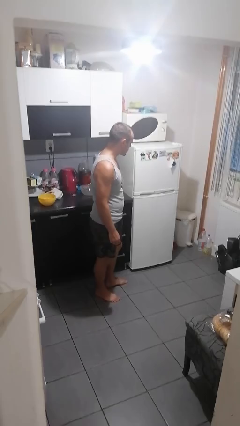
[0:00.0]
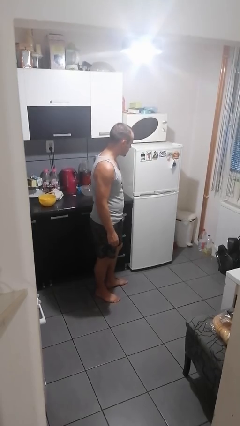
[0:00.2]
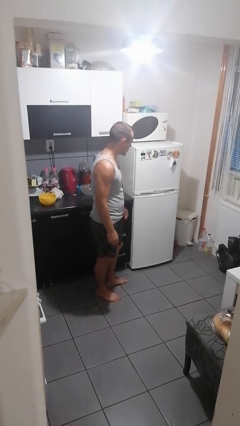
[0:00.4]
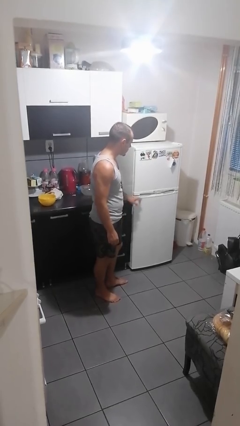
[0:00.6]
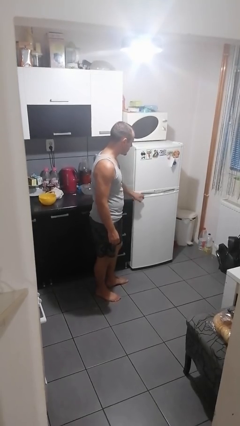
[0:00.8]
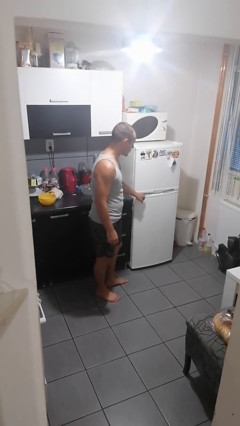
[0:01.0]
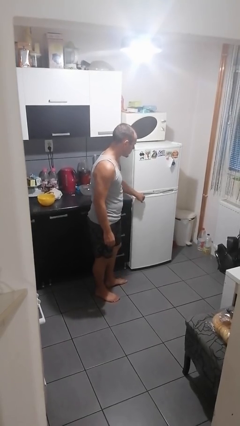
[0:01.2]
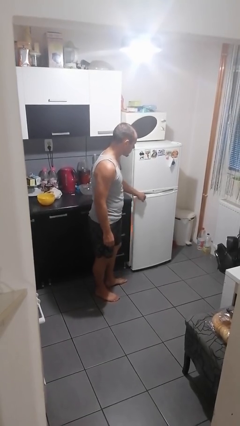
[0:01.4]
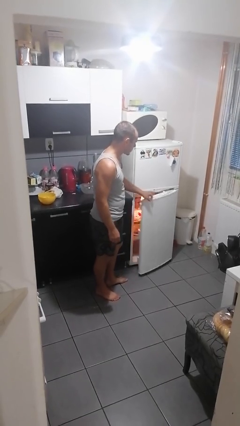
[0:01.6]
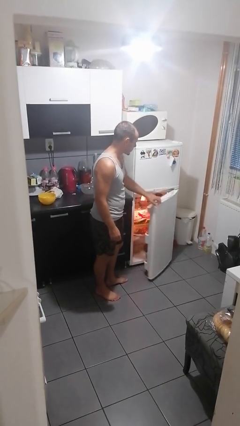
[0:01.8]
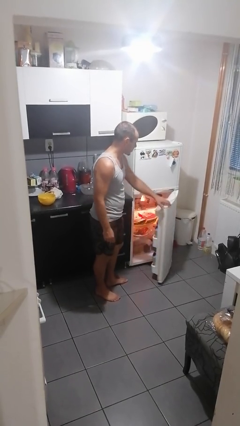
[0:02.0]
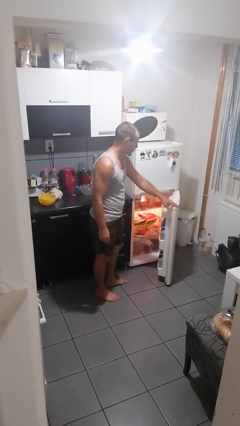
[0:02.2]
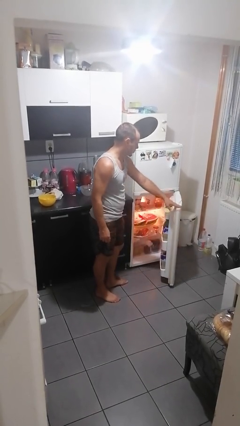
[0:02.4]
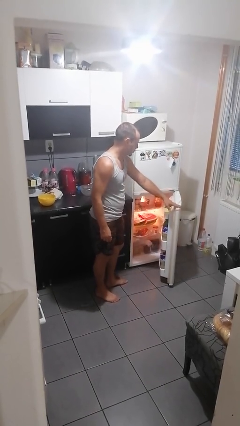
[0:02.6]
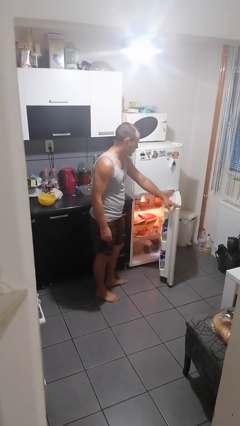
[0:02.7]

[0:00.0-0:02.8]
person opens refrigerator

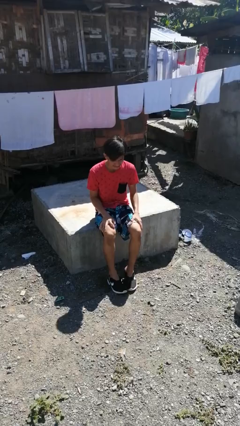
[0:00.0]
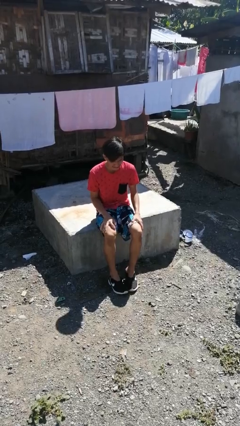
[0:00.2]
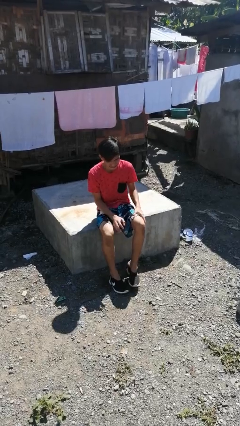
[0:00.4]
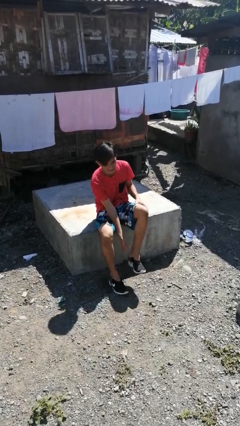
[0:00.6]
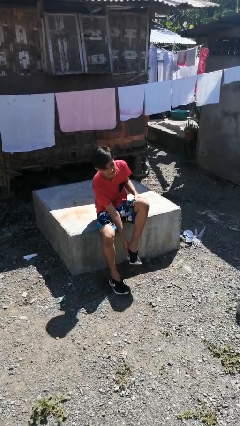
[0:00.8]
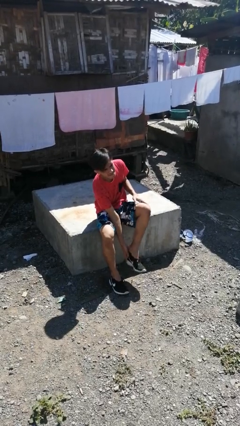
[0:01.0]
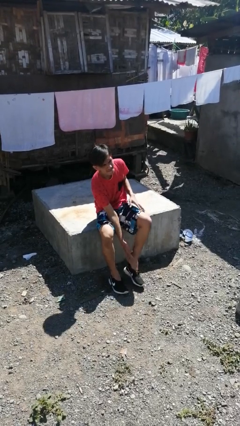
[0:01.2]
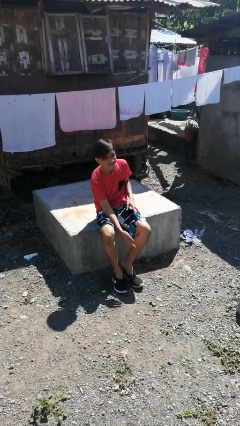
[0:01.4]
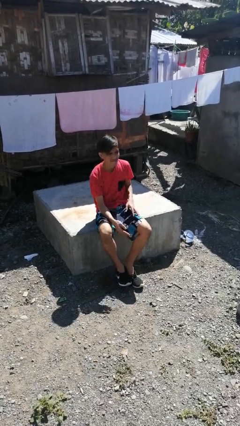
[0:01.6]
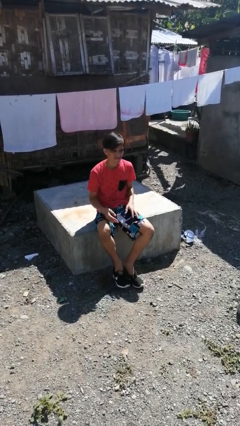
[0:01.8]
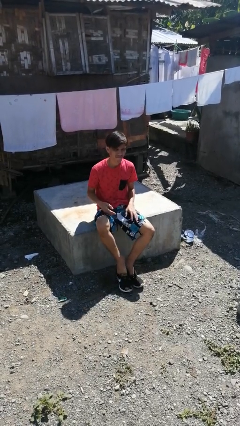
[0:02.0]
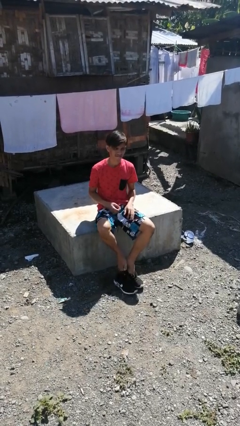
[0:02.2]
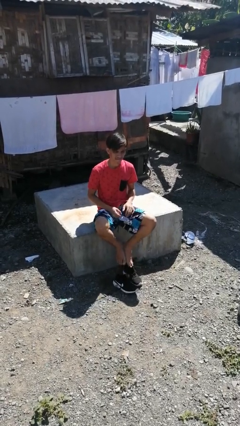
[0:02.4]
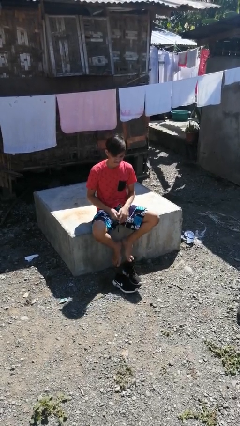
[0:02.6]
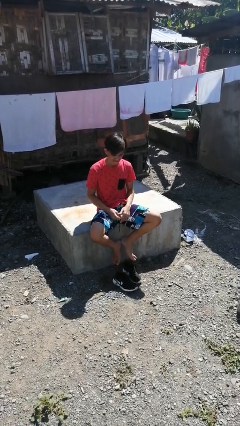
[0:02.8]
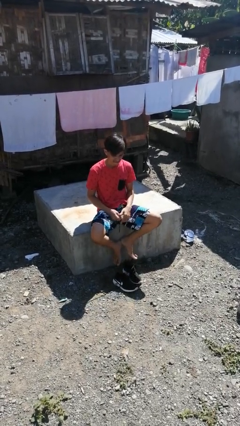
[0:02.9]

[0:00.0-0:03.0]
person takes off shoes

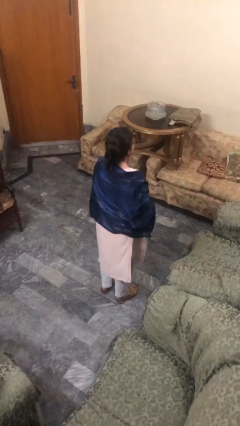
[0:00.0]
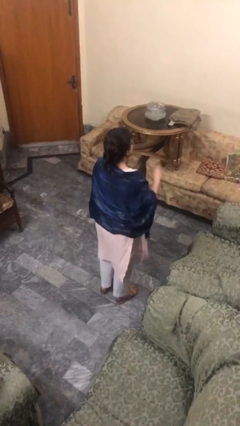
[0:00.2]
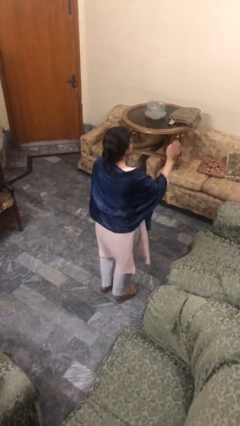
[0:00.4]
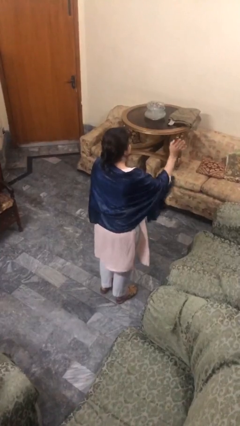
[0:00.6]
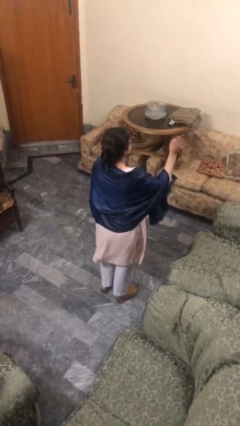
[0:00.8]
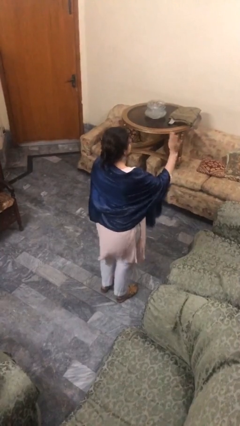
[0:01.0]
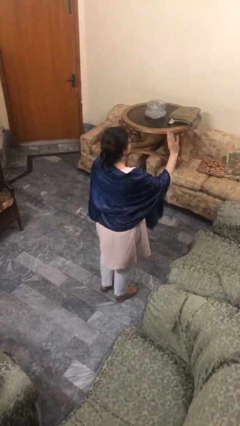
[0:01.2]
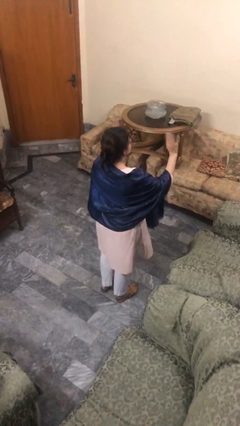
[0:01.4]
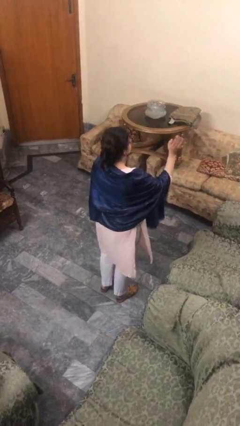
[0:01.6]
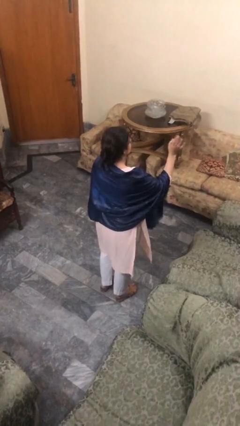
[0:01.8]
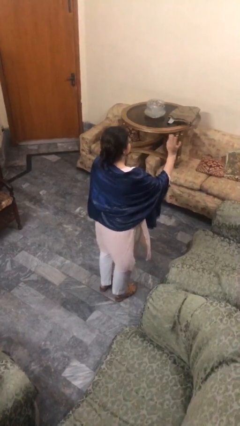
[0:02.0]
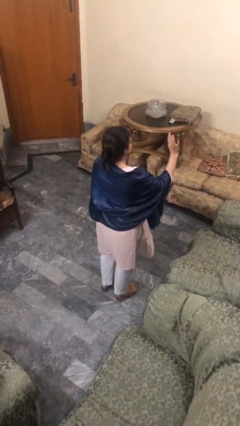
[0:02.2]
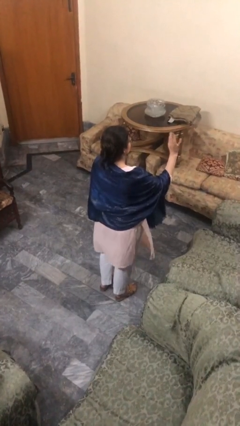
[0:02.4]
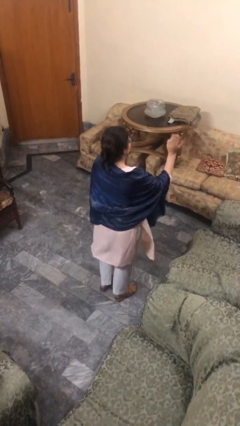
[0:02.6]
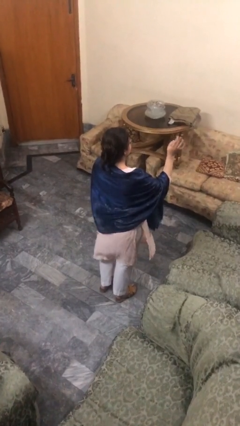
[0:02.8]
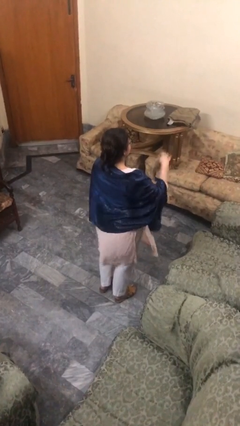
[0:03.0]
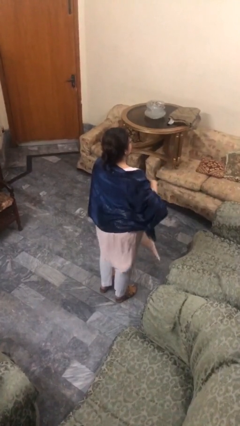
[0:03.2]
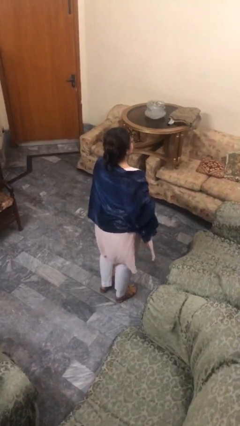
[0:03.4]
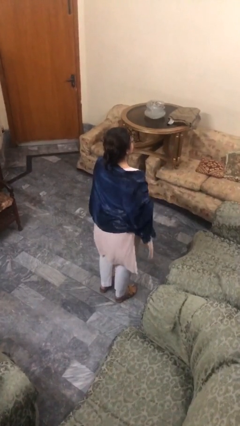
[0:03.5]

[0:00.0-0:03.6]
person waves at person

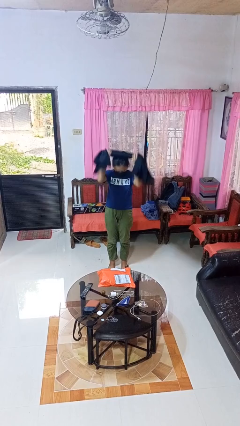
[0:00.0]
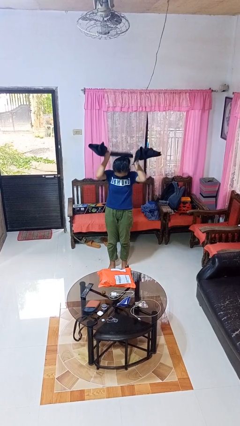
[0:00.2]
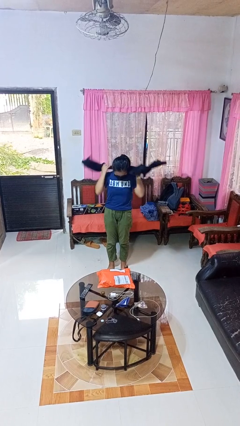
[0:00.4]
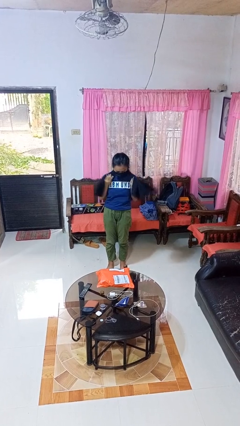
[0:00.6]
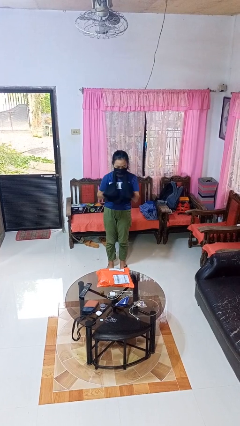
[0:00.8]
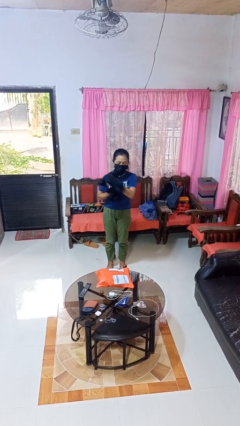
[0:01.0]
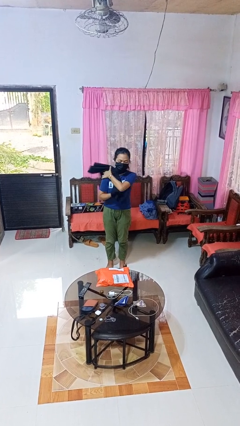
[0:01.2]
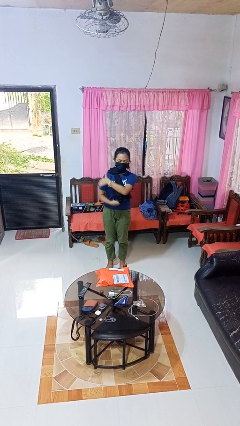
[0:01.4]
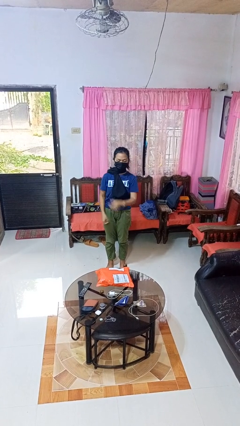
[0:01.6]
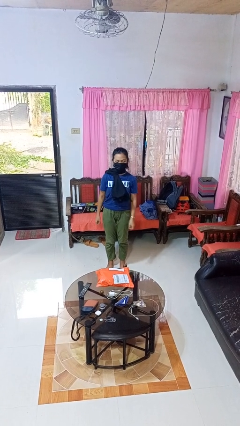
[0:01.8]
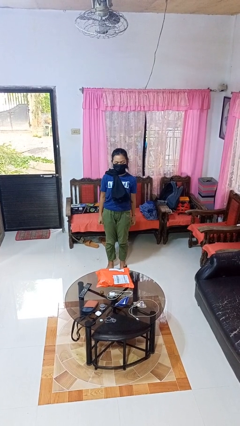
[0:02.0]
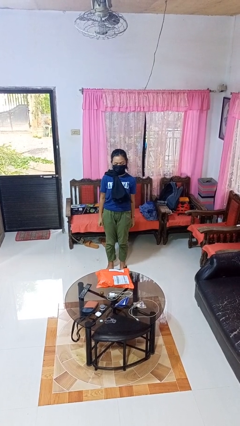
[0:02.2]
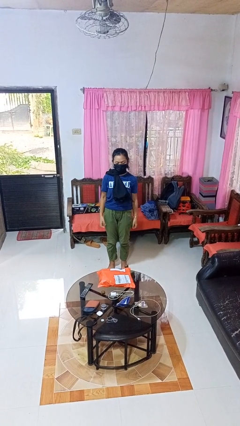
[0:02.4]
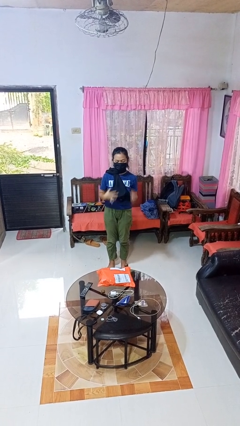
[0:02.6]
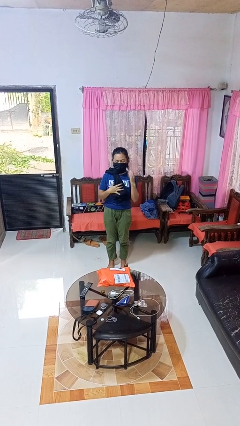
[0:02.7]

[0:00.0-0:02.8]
person puts on scarf

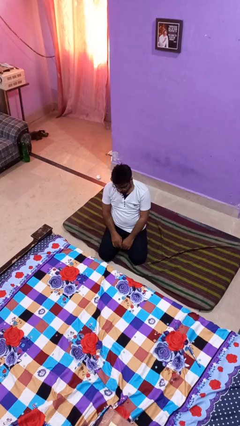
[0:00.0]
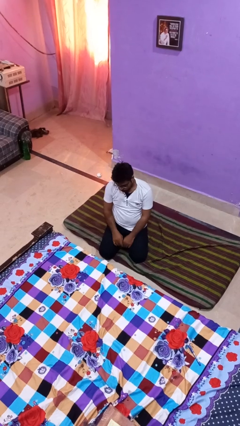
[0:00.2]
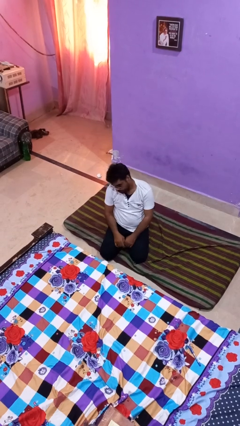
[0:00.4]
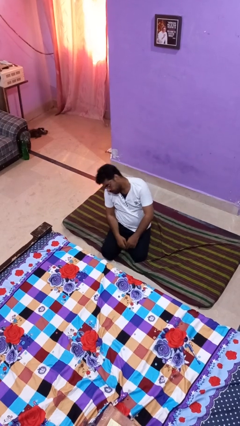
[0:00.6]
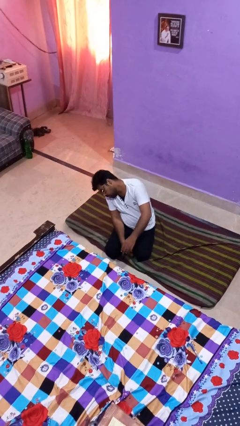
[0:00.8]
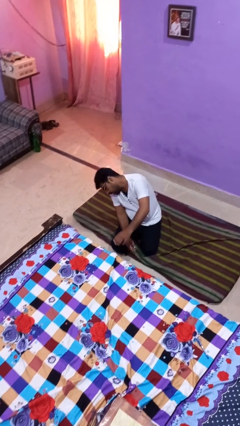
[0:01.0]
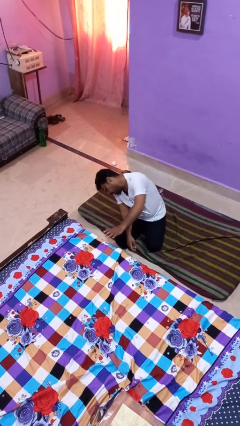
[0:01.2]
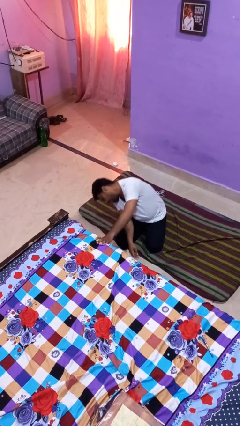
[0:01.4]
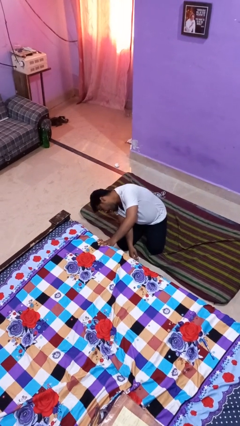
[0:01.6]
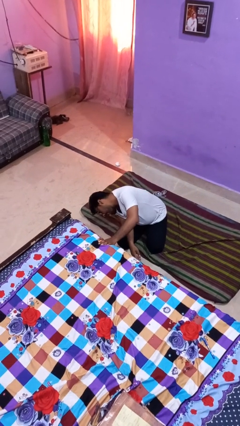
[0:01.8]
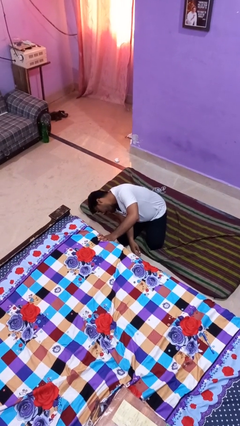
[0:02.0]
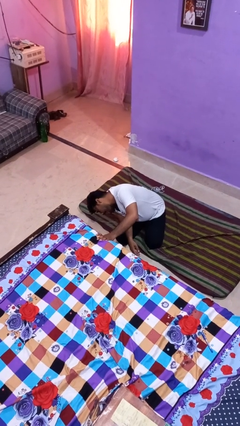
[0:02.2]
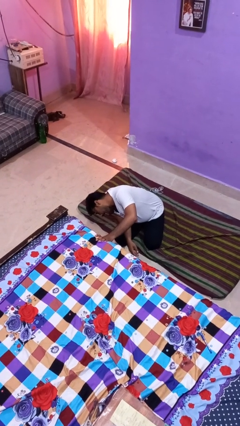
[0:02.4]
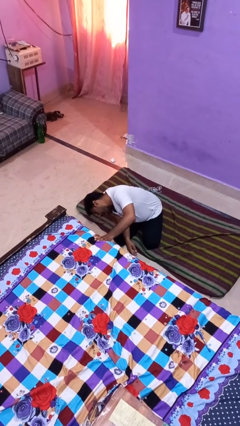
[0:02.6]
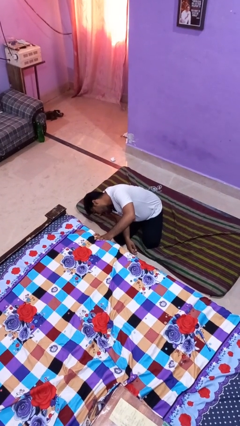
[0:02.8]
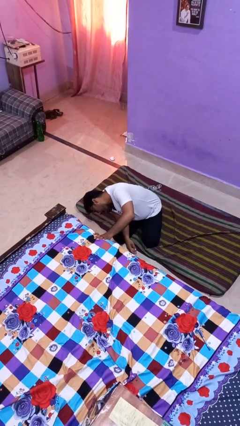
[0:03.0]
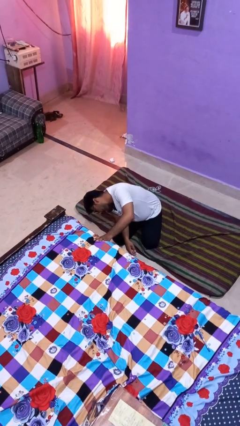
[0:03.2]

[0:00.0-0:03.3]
person searches under bed

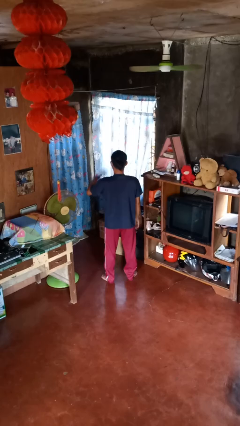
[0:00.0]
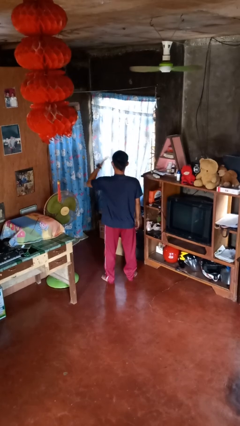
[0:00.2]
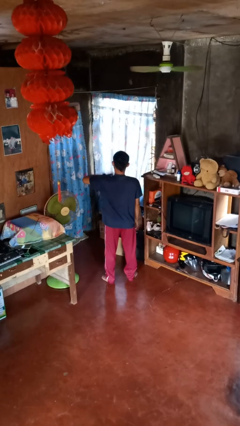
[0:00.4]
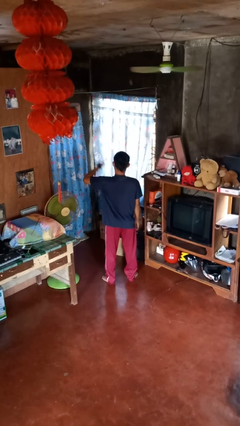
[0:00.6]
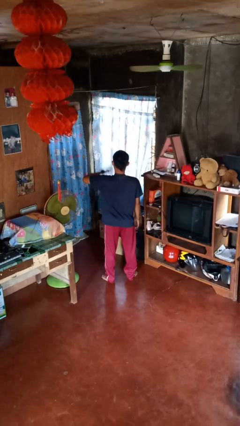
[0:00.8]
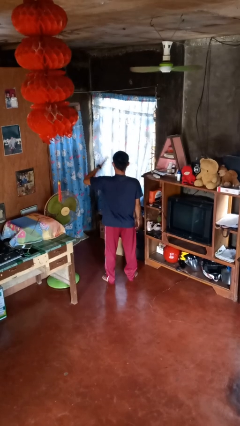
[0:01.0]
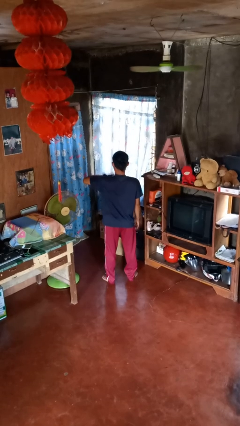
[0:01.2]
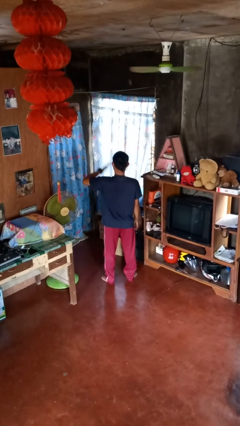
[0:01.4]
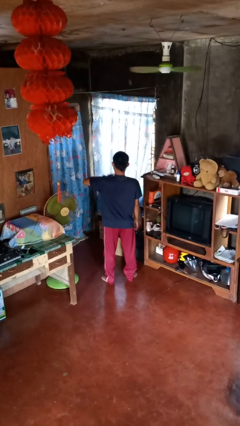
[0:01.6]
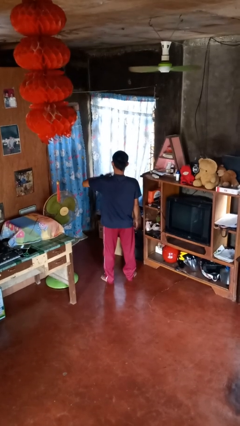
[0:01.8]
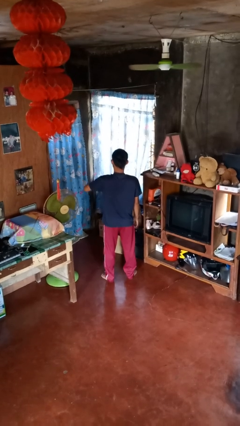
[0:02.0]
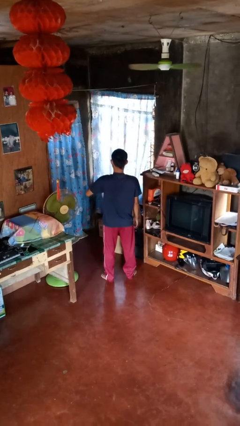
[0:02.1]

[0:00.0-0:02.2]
person drums on chest
